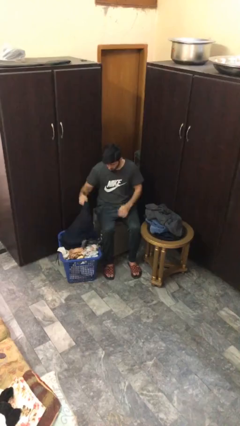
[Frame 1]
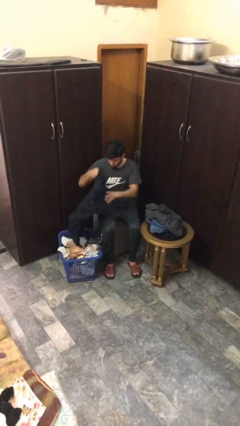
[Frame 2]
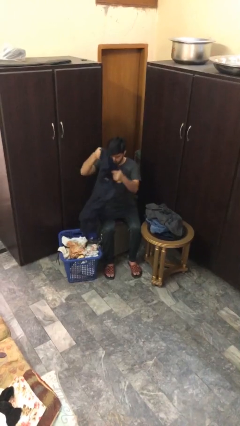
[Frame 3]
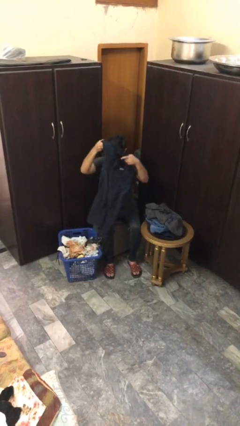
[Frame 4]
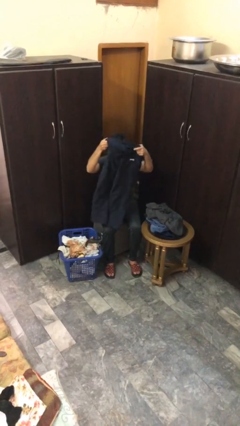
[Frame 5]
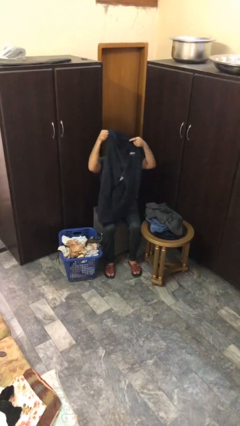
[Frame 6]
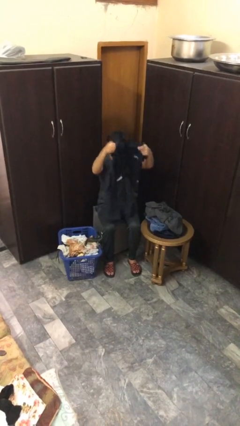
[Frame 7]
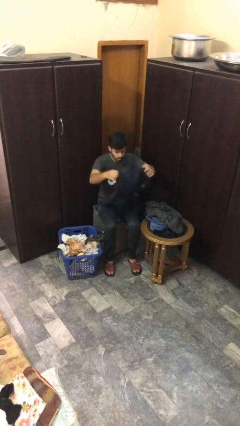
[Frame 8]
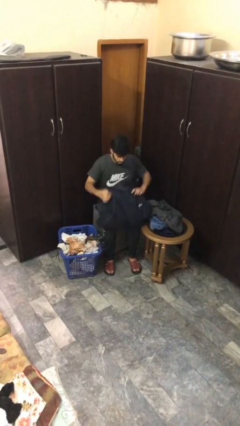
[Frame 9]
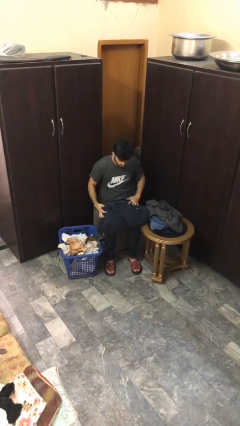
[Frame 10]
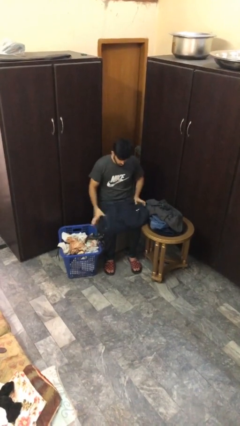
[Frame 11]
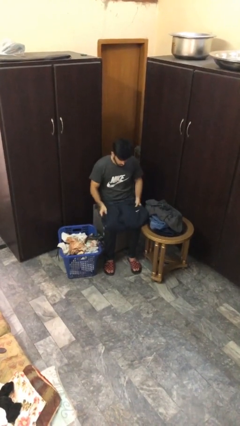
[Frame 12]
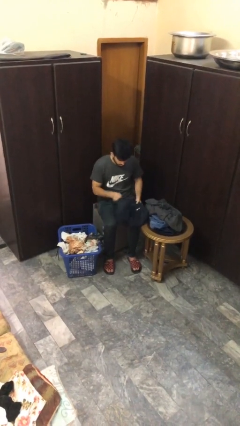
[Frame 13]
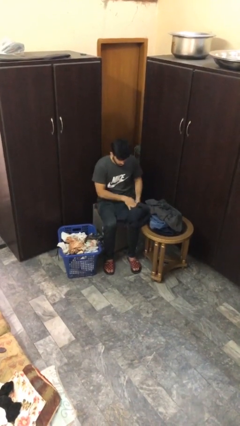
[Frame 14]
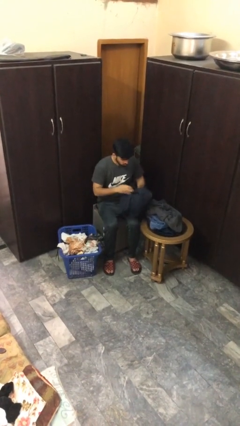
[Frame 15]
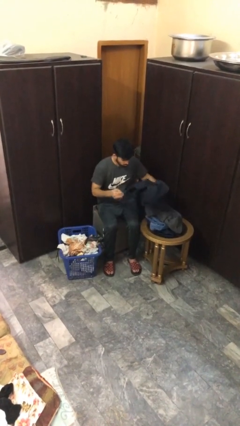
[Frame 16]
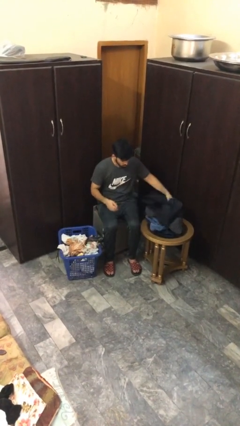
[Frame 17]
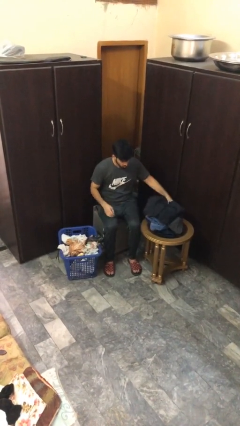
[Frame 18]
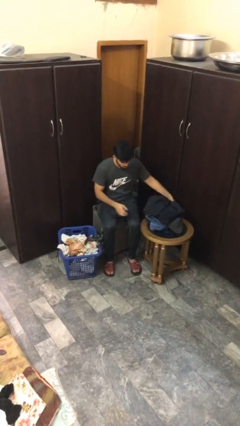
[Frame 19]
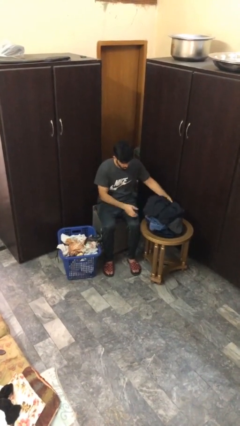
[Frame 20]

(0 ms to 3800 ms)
person folds pants

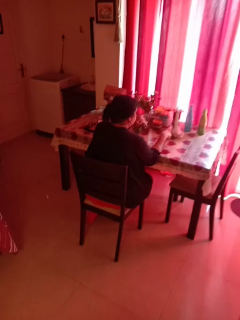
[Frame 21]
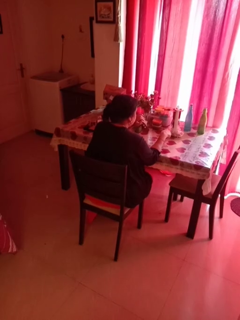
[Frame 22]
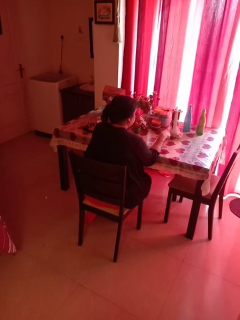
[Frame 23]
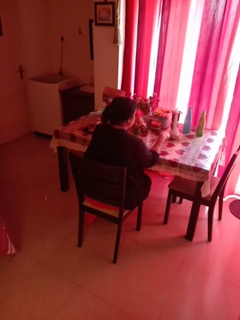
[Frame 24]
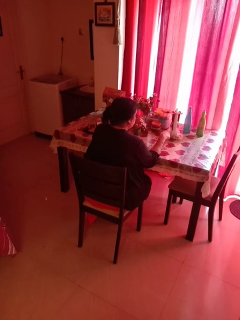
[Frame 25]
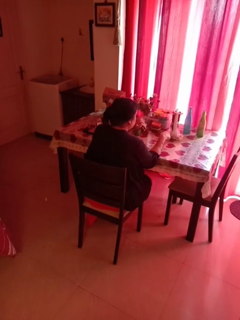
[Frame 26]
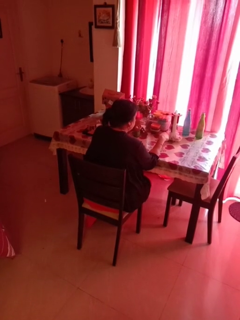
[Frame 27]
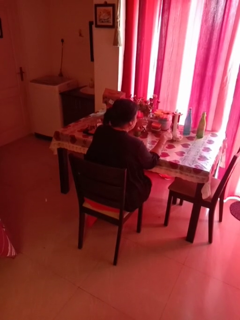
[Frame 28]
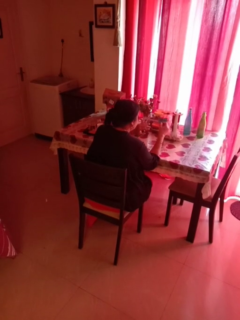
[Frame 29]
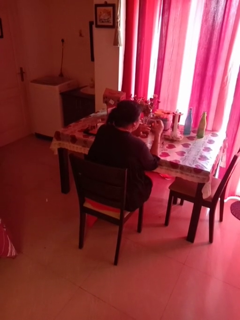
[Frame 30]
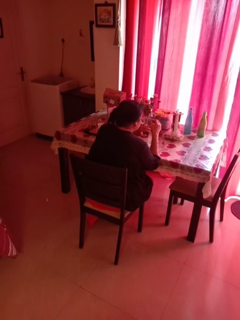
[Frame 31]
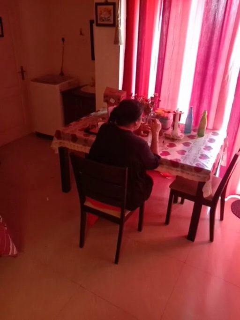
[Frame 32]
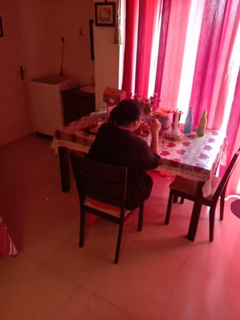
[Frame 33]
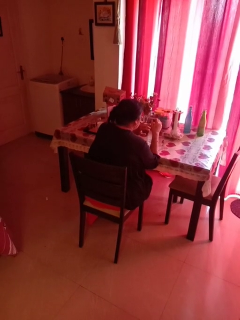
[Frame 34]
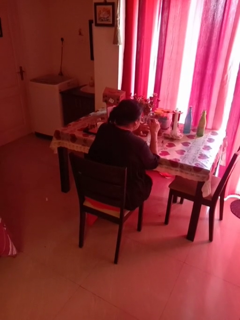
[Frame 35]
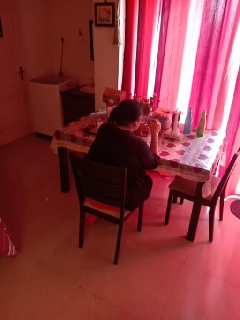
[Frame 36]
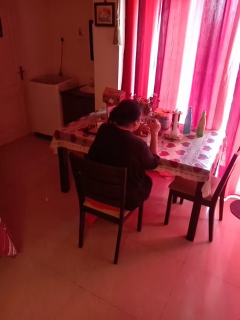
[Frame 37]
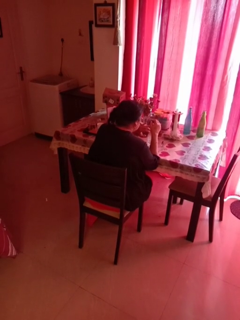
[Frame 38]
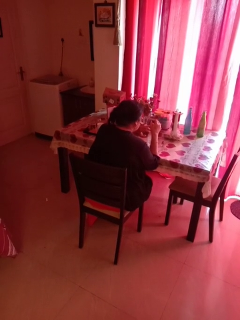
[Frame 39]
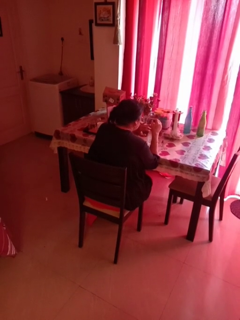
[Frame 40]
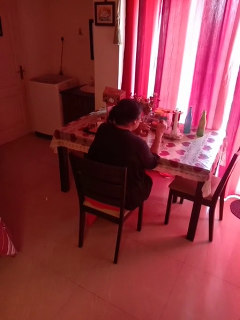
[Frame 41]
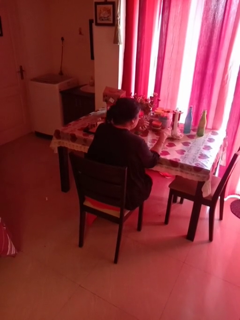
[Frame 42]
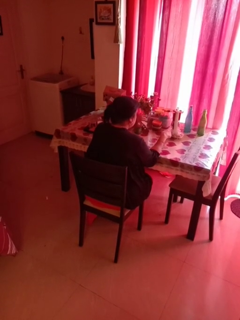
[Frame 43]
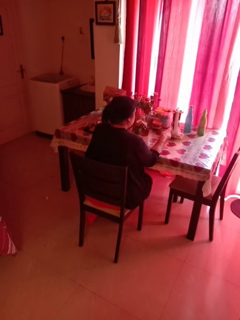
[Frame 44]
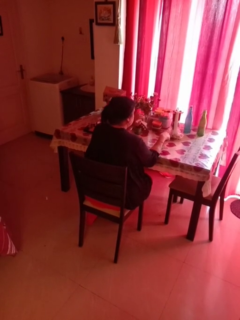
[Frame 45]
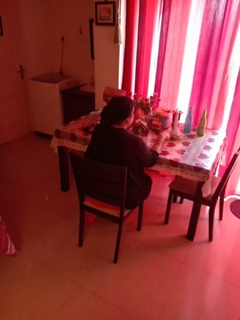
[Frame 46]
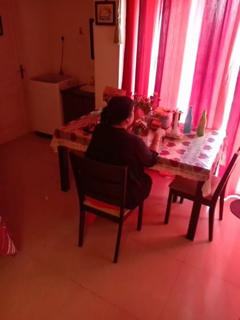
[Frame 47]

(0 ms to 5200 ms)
person paints fingernails

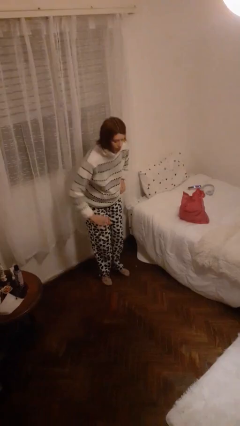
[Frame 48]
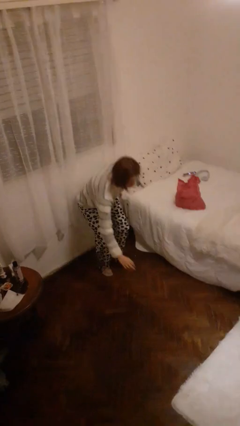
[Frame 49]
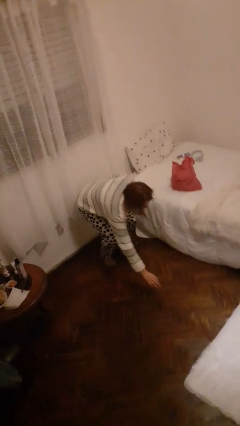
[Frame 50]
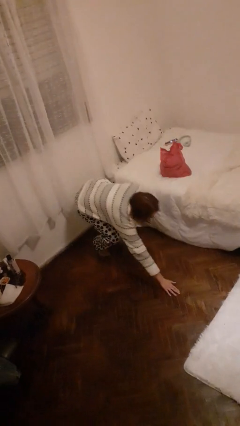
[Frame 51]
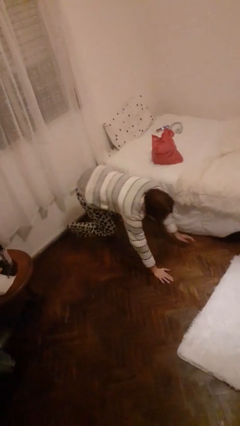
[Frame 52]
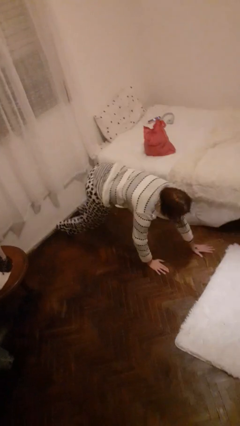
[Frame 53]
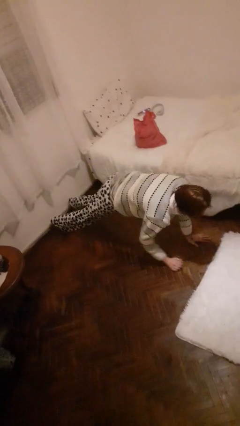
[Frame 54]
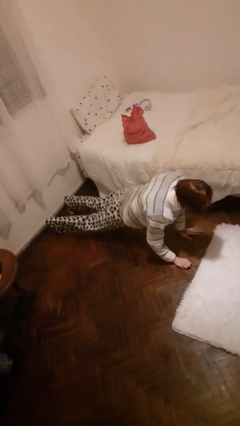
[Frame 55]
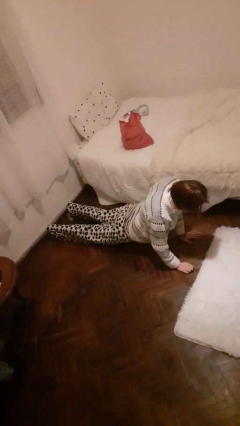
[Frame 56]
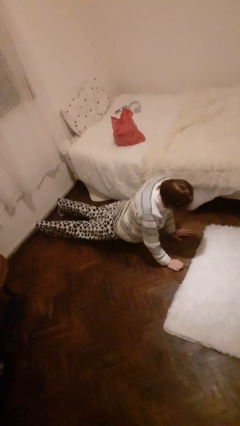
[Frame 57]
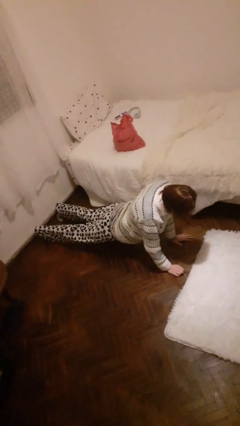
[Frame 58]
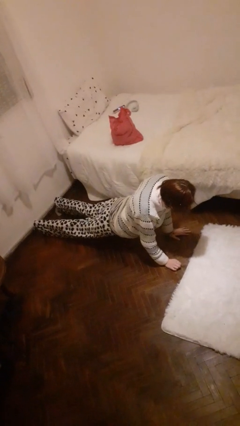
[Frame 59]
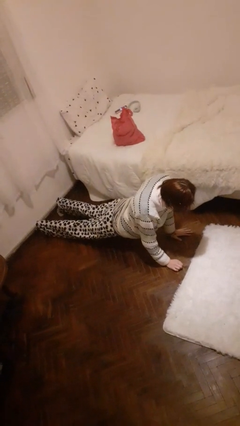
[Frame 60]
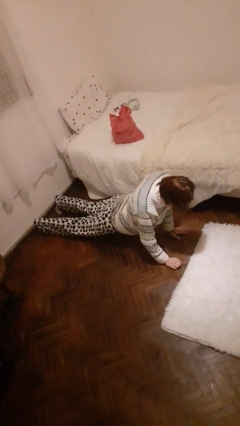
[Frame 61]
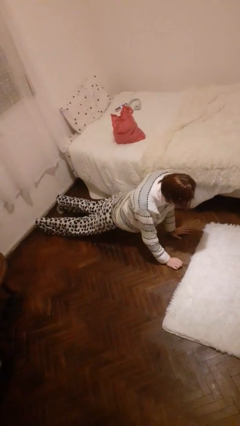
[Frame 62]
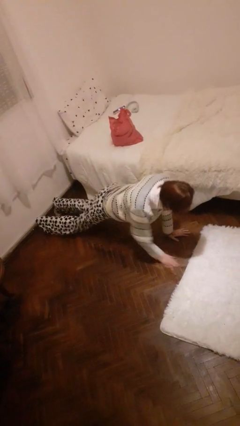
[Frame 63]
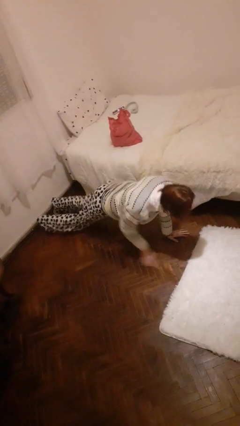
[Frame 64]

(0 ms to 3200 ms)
person exercises with plank

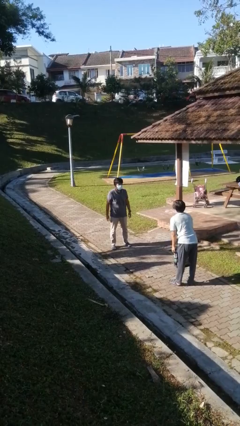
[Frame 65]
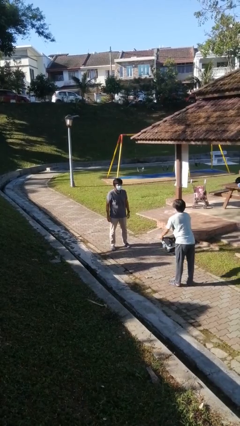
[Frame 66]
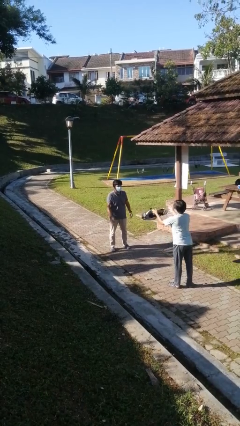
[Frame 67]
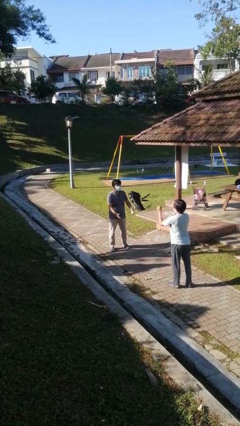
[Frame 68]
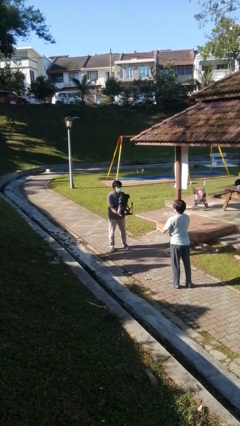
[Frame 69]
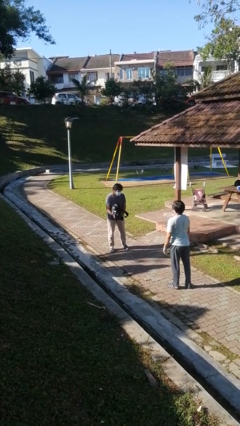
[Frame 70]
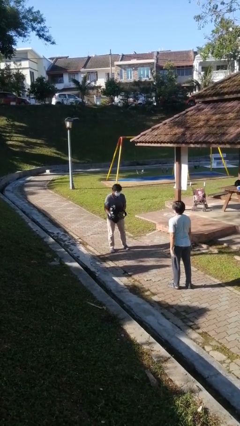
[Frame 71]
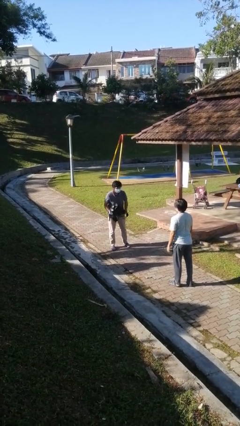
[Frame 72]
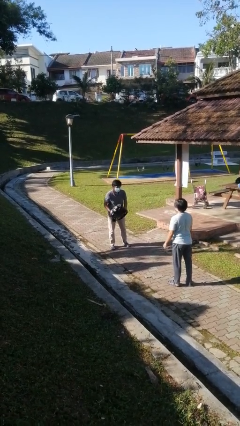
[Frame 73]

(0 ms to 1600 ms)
person catches object from person

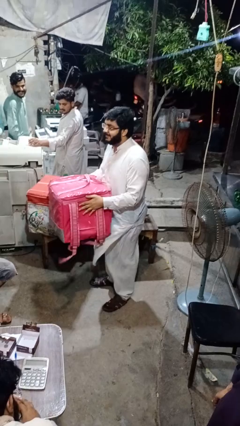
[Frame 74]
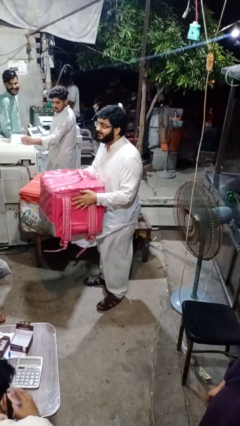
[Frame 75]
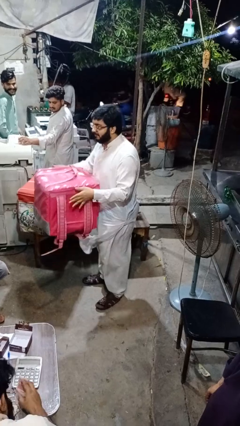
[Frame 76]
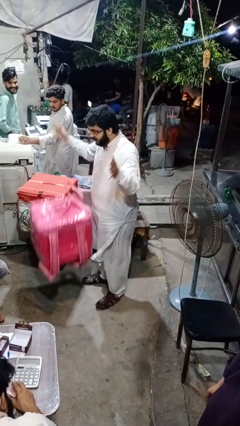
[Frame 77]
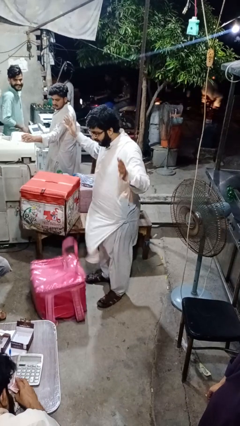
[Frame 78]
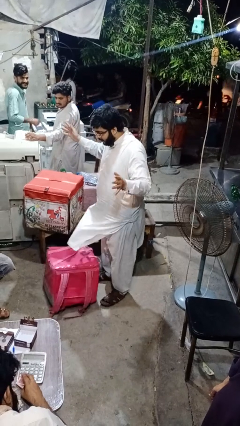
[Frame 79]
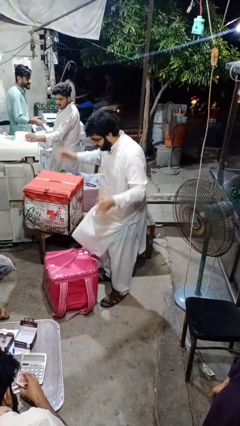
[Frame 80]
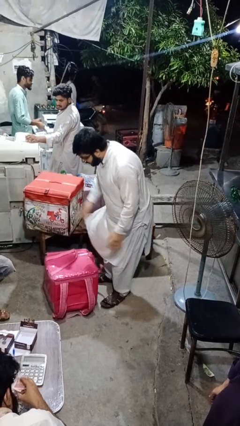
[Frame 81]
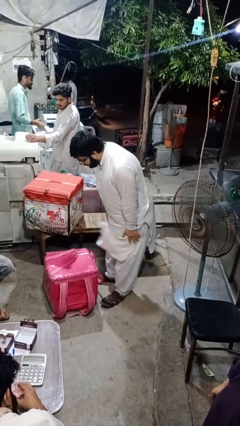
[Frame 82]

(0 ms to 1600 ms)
person drops object

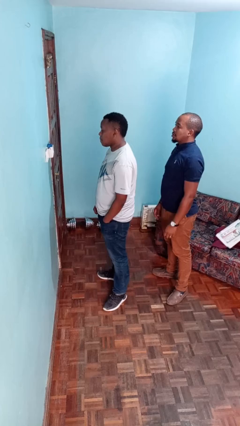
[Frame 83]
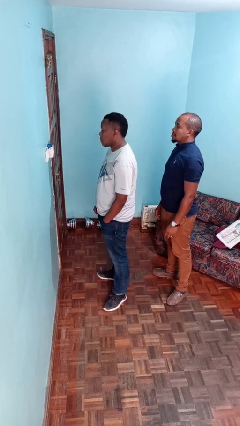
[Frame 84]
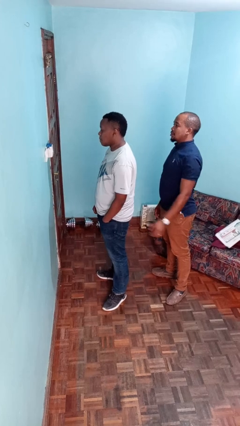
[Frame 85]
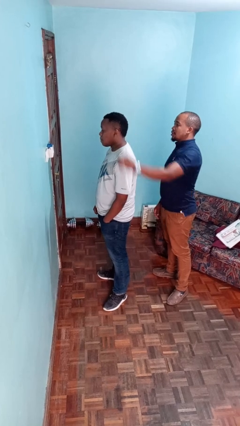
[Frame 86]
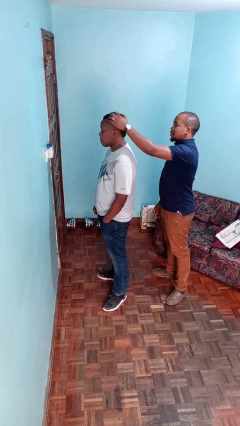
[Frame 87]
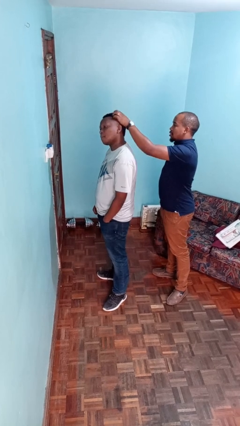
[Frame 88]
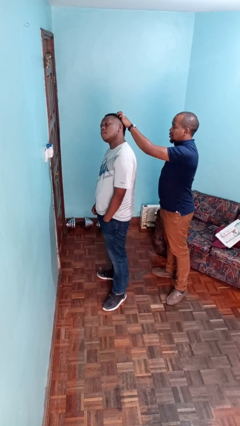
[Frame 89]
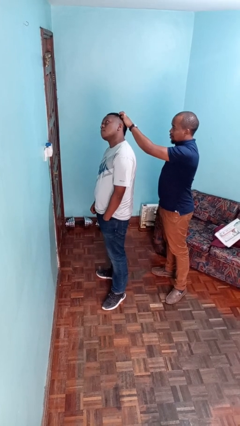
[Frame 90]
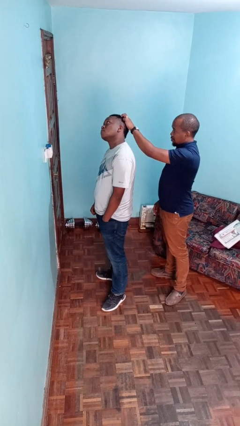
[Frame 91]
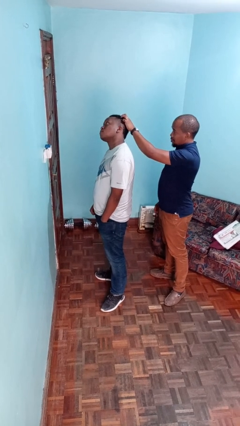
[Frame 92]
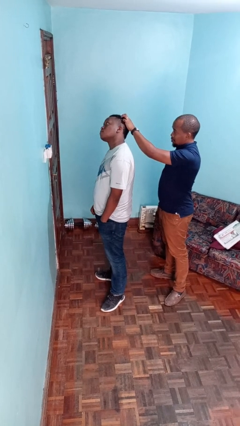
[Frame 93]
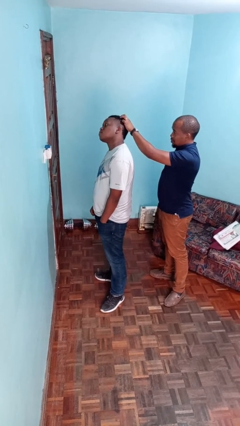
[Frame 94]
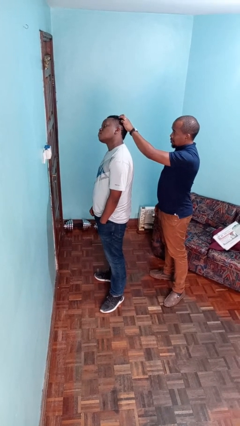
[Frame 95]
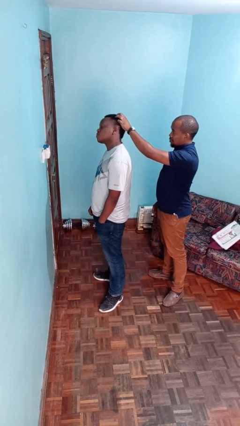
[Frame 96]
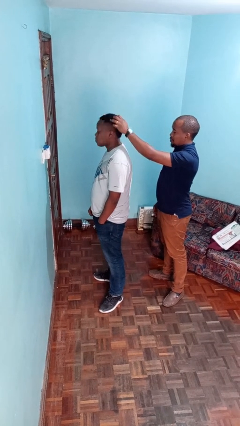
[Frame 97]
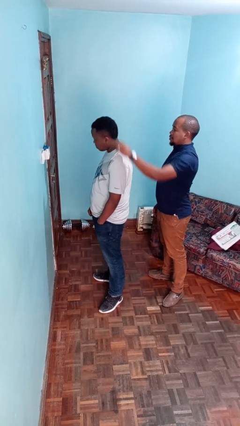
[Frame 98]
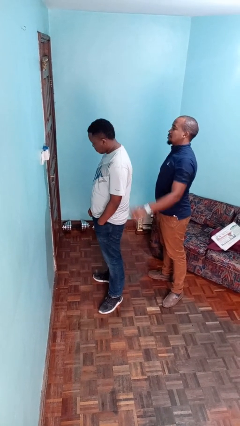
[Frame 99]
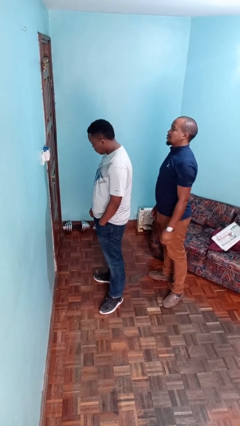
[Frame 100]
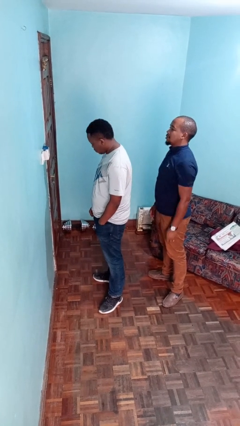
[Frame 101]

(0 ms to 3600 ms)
person grabs person by hair
